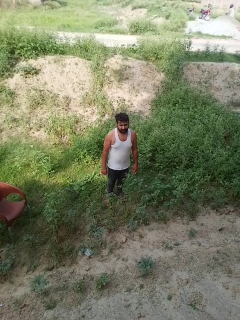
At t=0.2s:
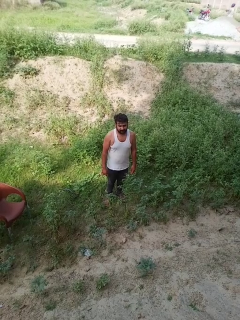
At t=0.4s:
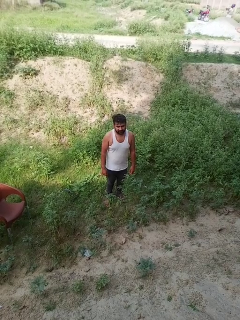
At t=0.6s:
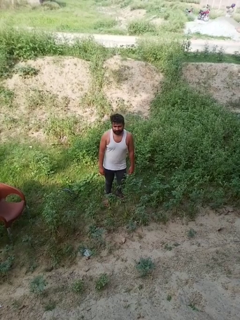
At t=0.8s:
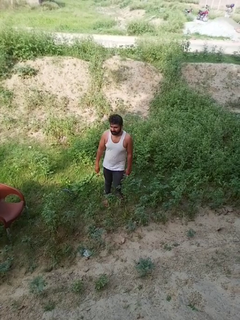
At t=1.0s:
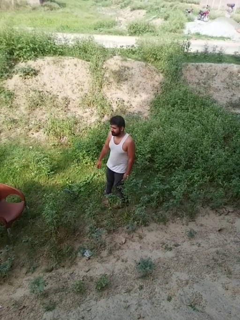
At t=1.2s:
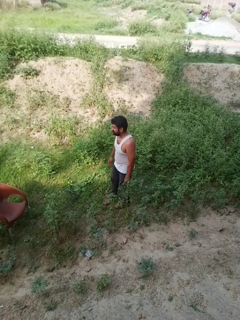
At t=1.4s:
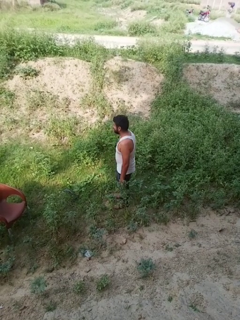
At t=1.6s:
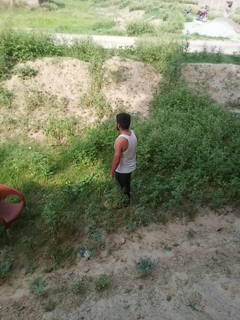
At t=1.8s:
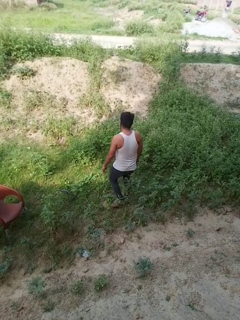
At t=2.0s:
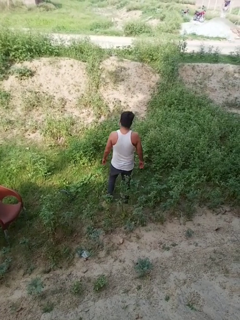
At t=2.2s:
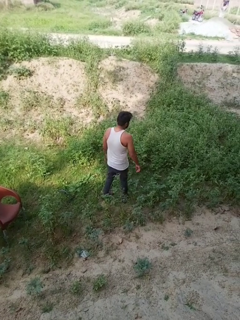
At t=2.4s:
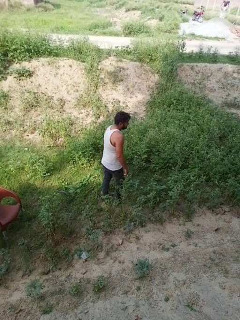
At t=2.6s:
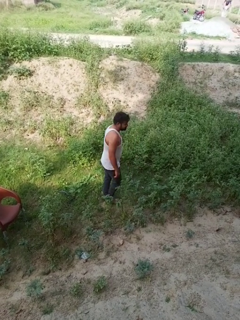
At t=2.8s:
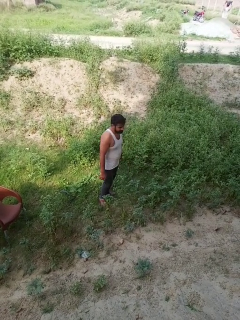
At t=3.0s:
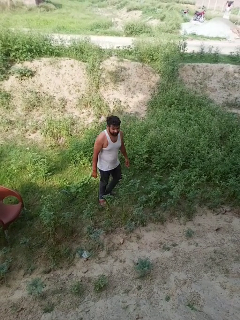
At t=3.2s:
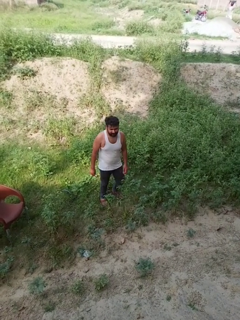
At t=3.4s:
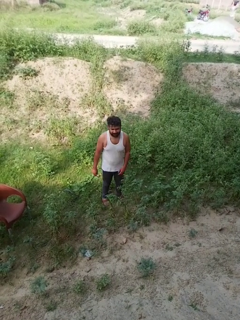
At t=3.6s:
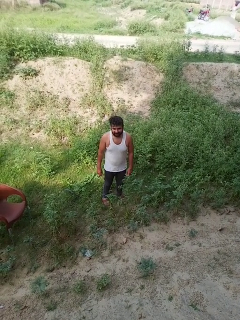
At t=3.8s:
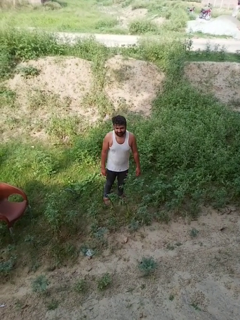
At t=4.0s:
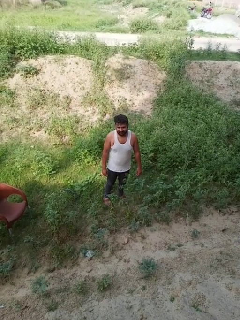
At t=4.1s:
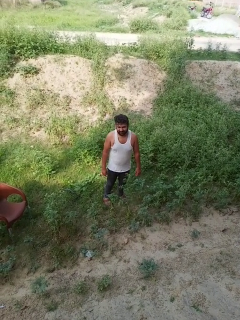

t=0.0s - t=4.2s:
person twirls

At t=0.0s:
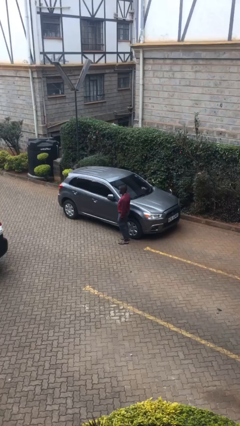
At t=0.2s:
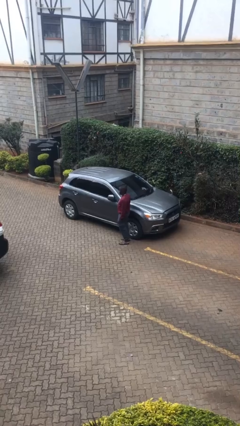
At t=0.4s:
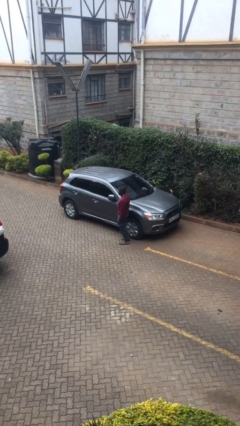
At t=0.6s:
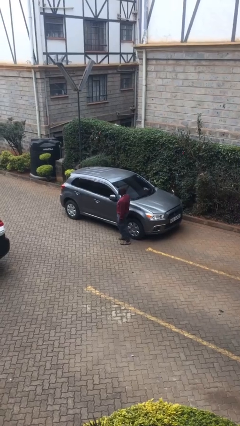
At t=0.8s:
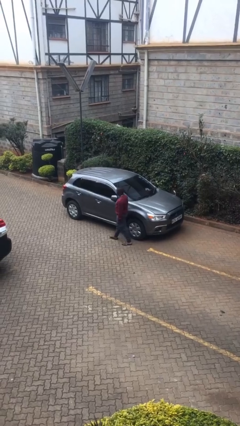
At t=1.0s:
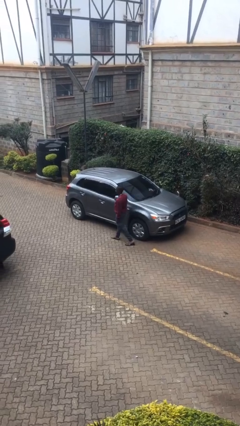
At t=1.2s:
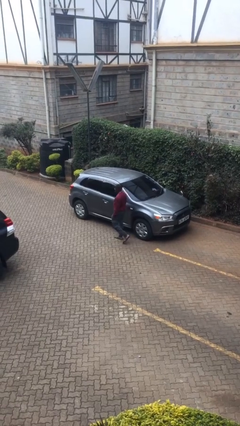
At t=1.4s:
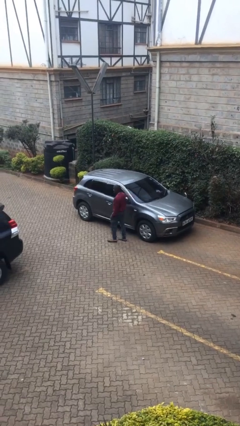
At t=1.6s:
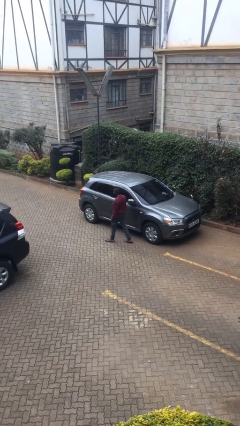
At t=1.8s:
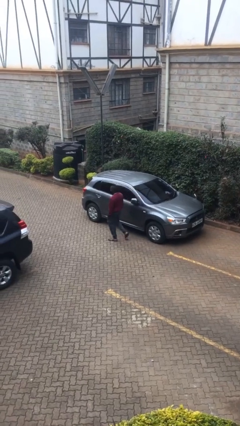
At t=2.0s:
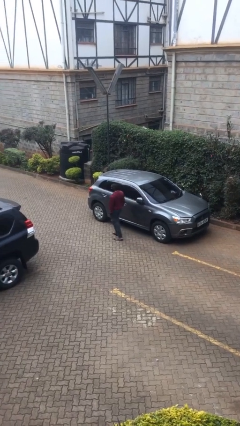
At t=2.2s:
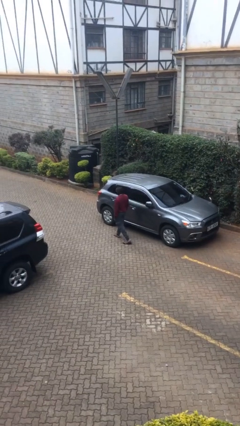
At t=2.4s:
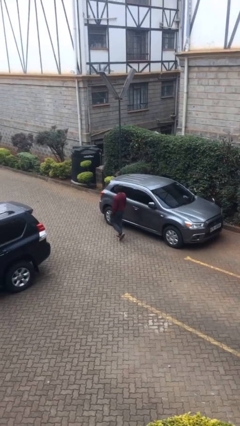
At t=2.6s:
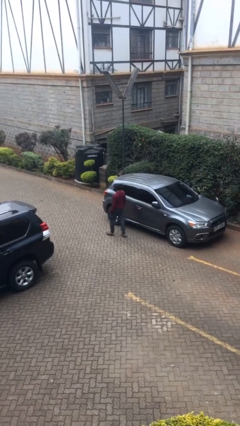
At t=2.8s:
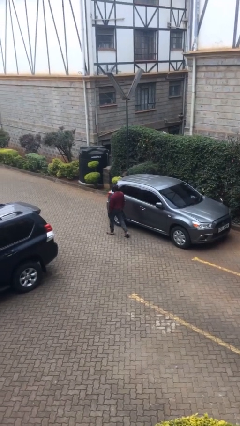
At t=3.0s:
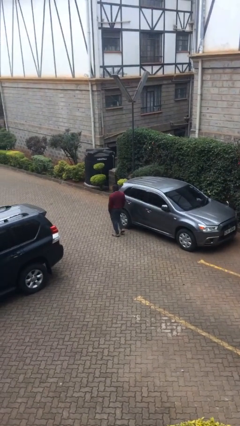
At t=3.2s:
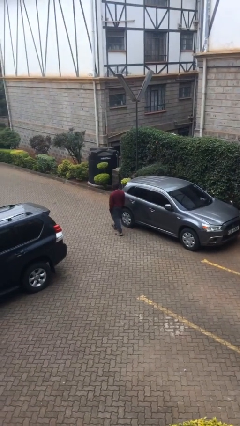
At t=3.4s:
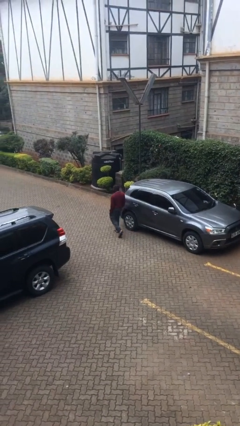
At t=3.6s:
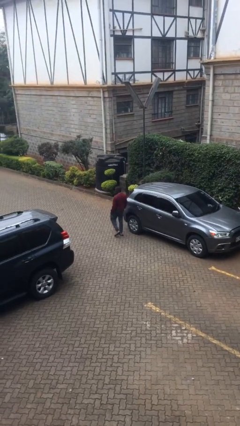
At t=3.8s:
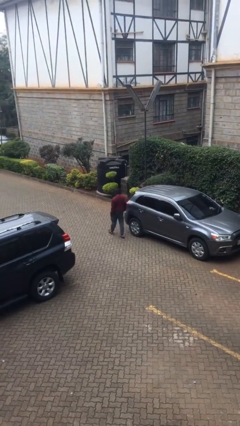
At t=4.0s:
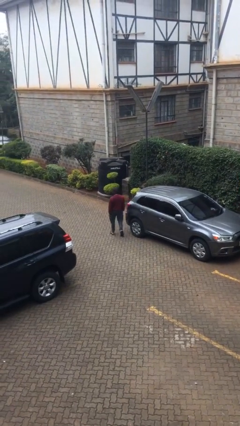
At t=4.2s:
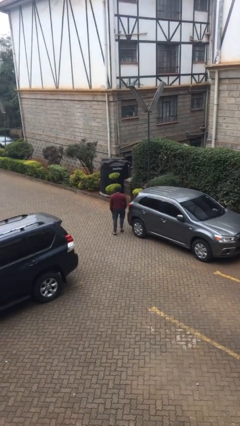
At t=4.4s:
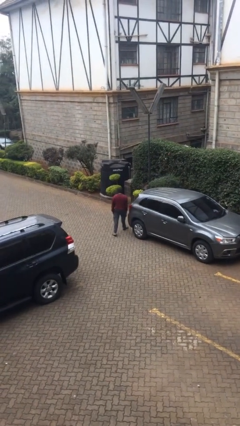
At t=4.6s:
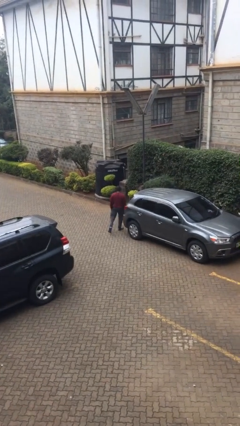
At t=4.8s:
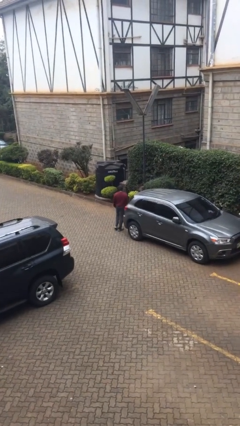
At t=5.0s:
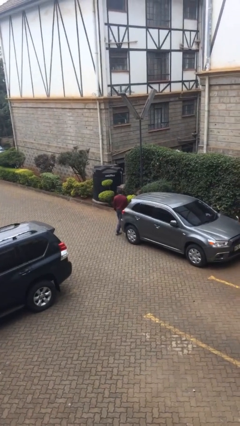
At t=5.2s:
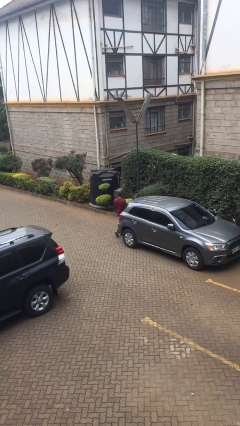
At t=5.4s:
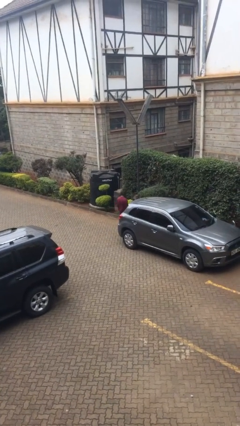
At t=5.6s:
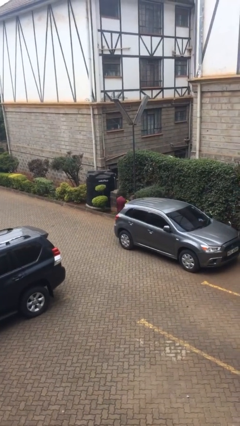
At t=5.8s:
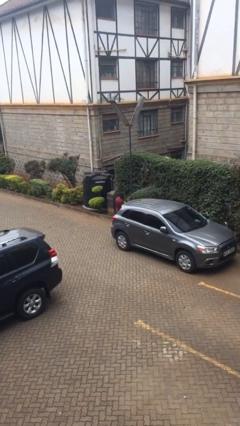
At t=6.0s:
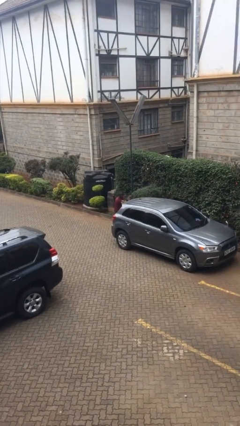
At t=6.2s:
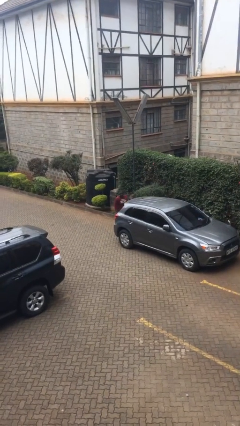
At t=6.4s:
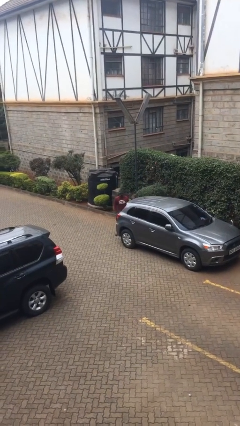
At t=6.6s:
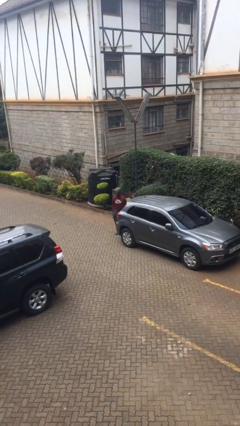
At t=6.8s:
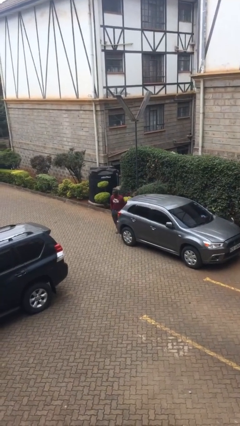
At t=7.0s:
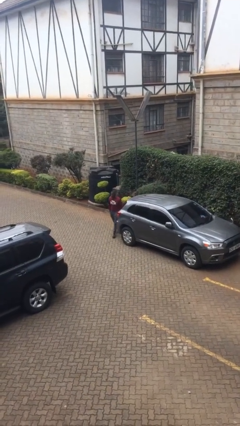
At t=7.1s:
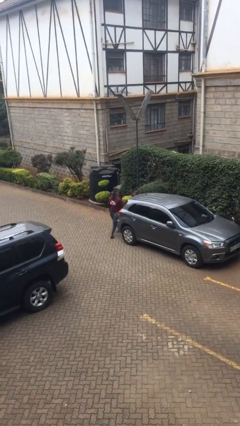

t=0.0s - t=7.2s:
person walks around car

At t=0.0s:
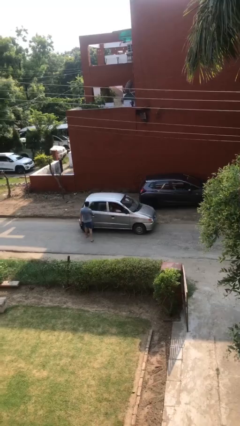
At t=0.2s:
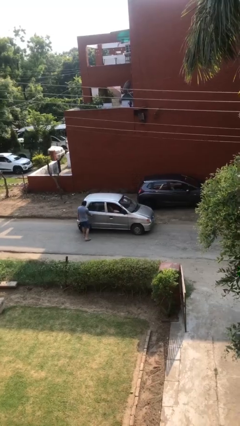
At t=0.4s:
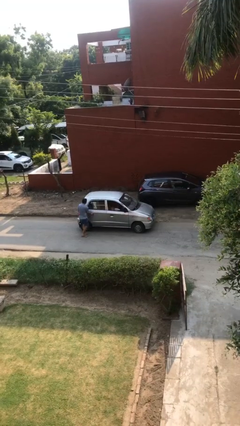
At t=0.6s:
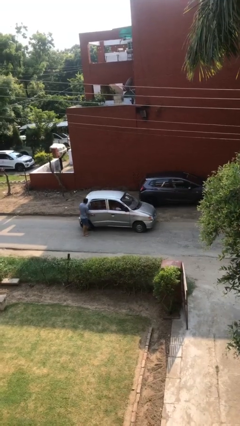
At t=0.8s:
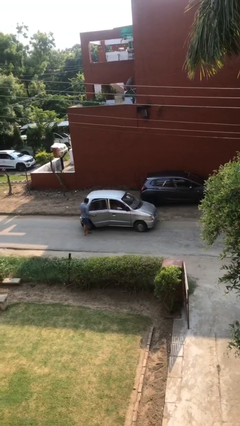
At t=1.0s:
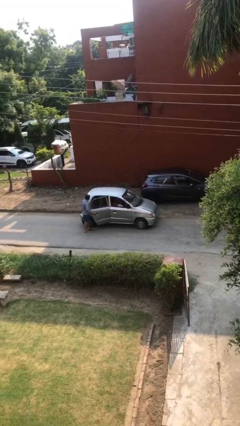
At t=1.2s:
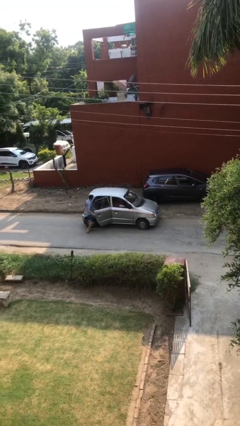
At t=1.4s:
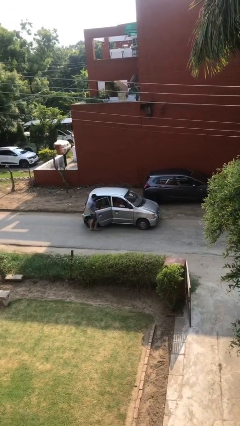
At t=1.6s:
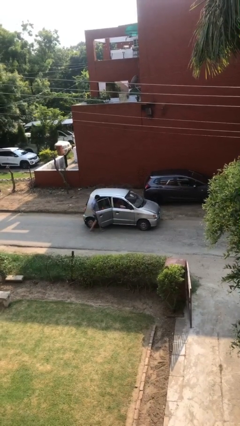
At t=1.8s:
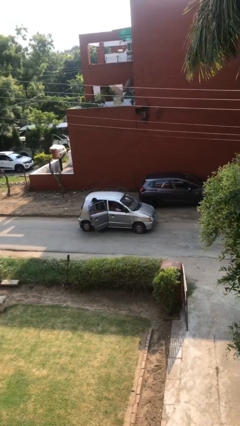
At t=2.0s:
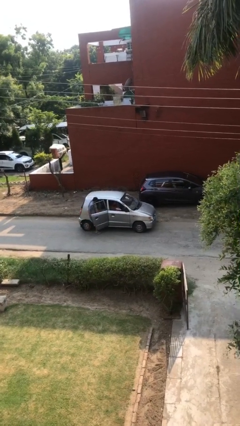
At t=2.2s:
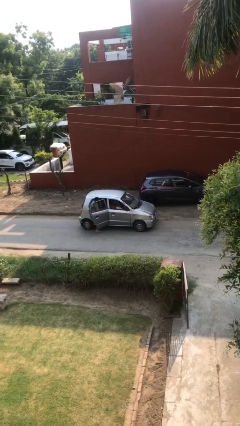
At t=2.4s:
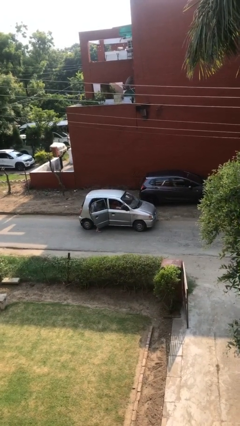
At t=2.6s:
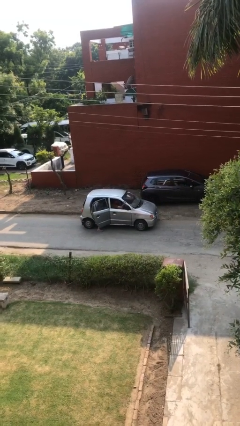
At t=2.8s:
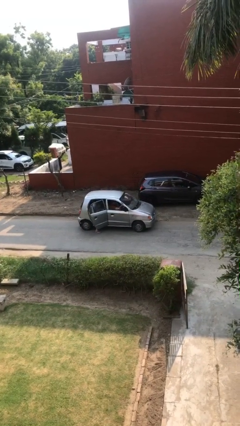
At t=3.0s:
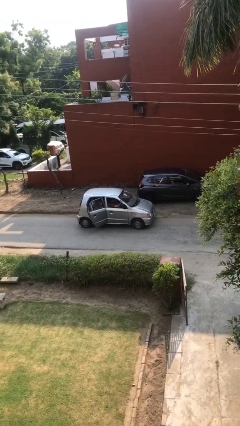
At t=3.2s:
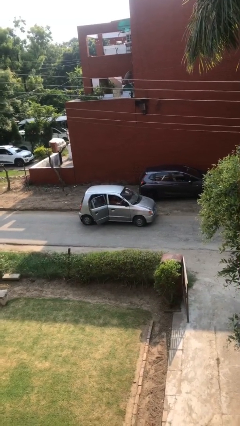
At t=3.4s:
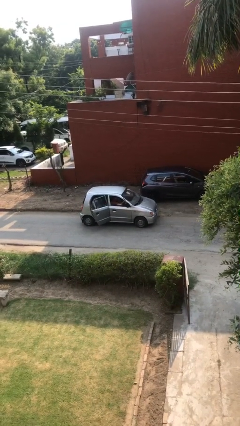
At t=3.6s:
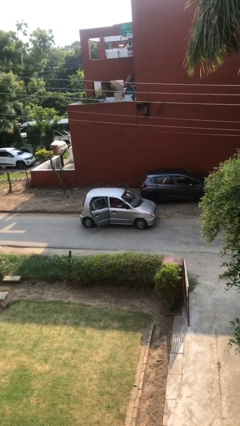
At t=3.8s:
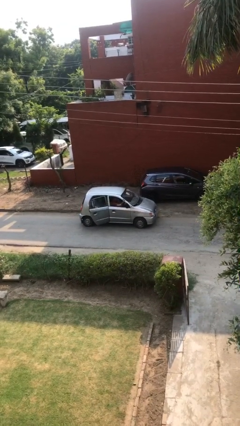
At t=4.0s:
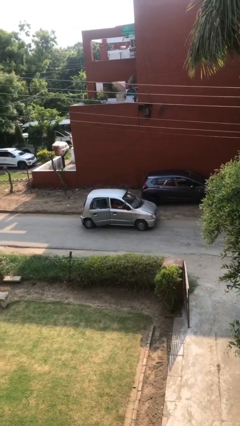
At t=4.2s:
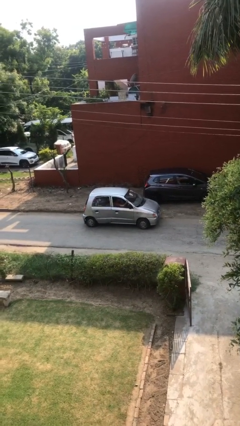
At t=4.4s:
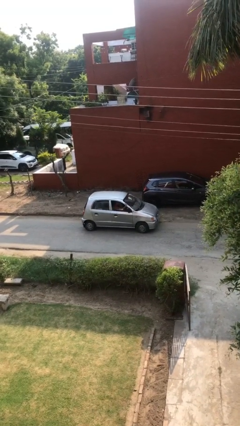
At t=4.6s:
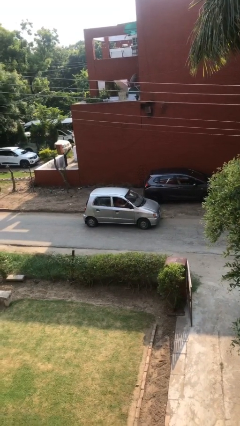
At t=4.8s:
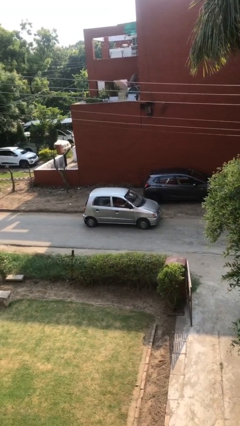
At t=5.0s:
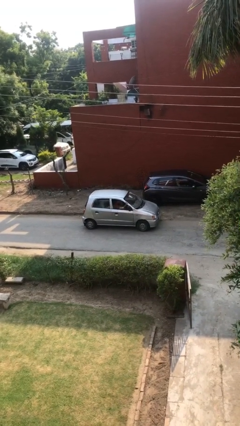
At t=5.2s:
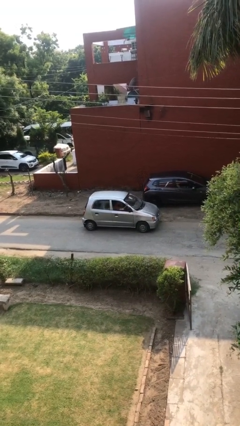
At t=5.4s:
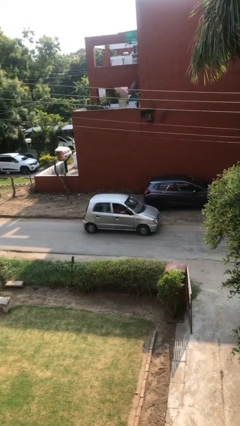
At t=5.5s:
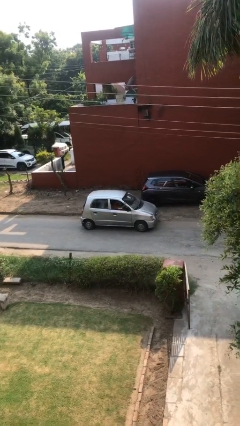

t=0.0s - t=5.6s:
car picks up person

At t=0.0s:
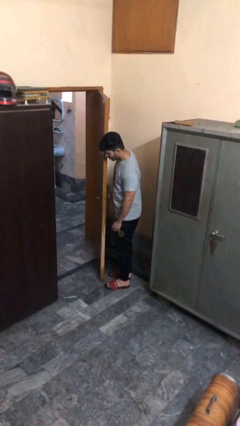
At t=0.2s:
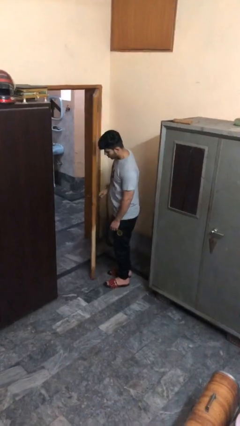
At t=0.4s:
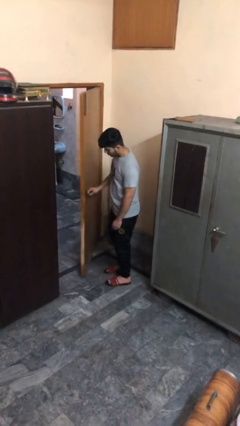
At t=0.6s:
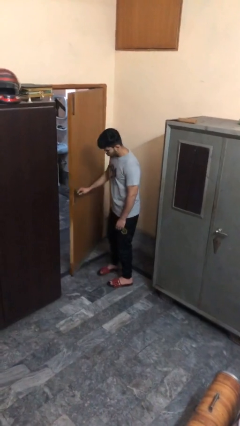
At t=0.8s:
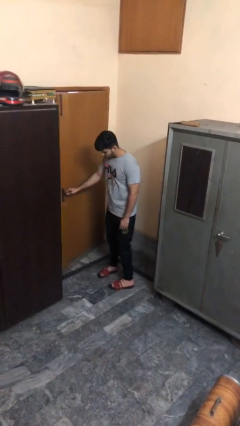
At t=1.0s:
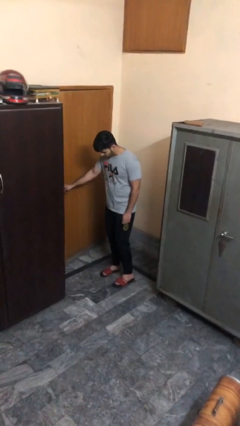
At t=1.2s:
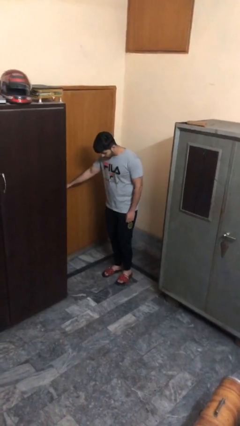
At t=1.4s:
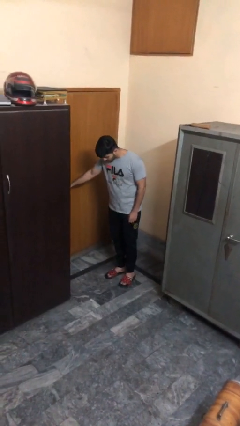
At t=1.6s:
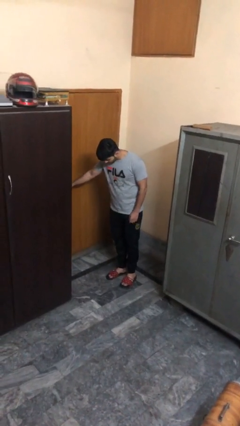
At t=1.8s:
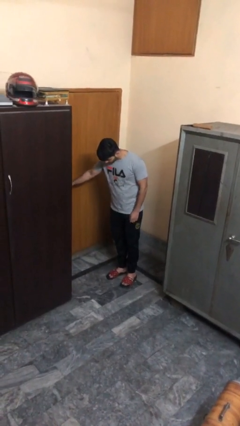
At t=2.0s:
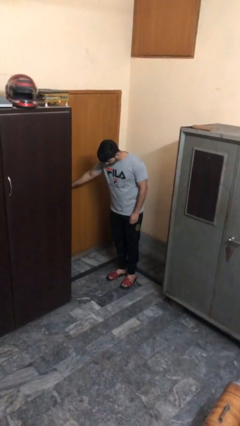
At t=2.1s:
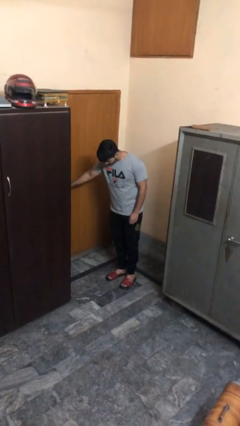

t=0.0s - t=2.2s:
person closes facility door
